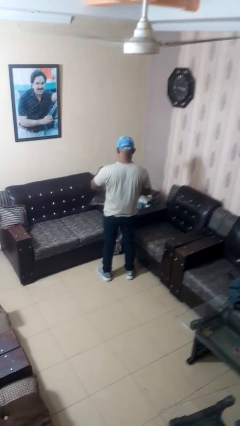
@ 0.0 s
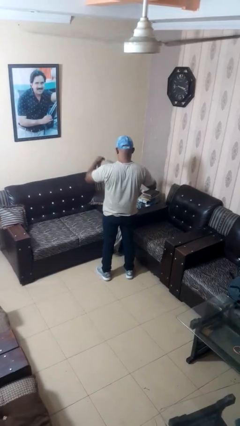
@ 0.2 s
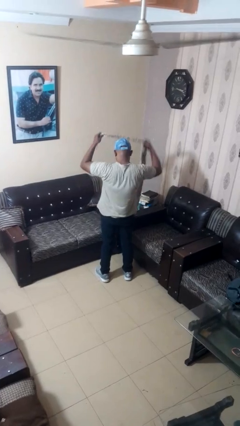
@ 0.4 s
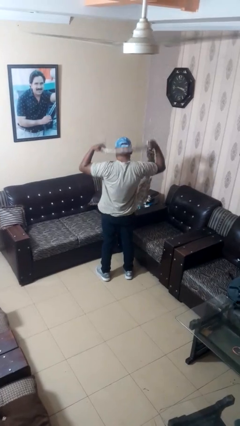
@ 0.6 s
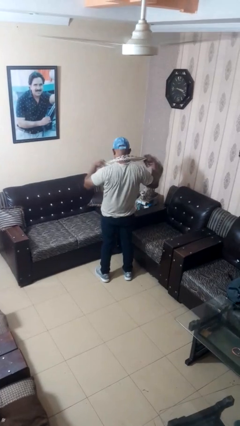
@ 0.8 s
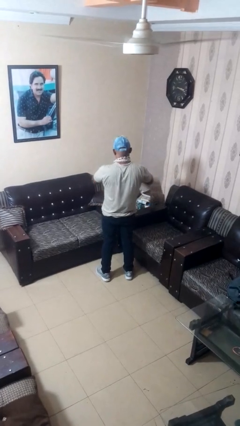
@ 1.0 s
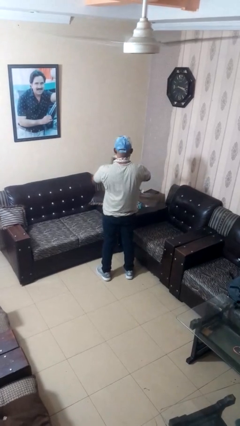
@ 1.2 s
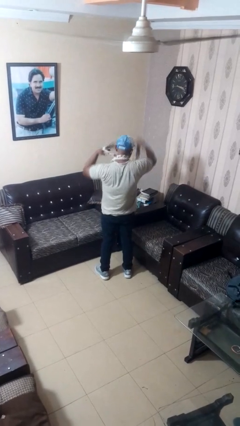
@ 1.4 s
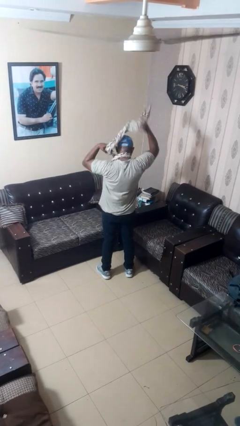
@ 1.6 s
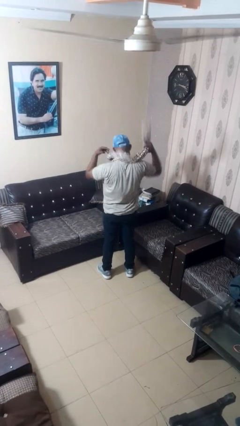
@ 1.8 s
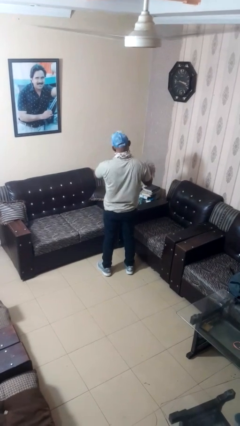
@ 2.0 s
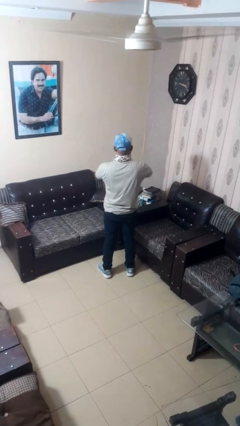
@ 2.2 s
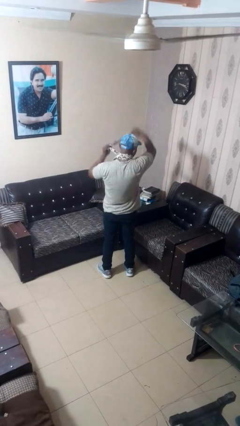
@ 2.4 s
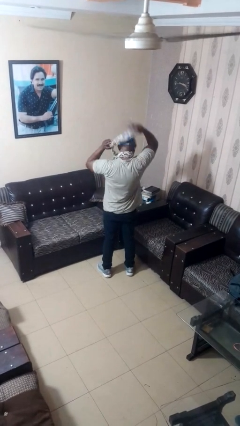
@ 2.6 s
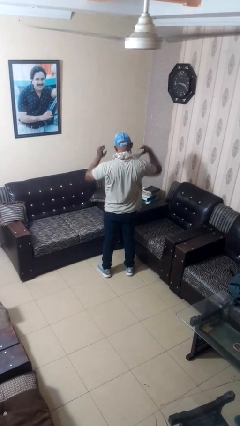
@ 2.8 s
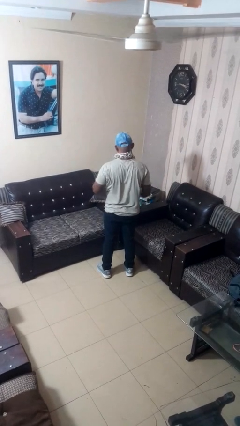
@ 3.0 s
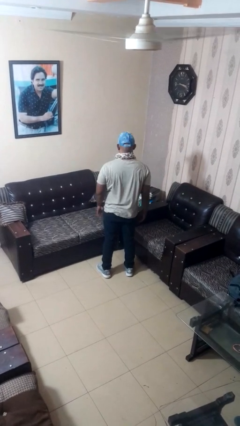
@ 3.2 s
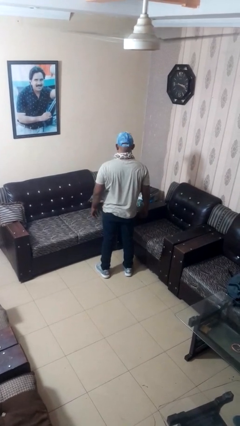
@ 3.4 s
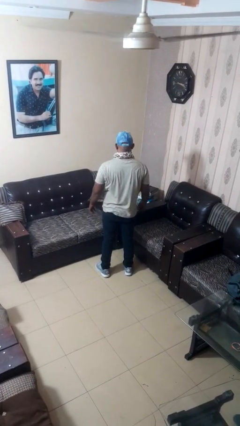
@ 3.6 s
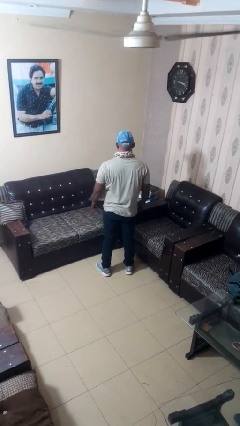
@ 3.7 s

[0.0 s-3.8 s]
person puts on scarf

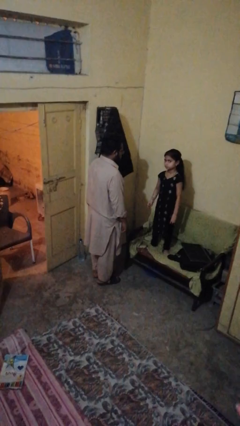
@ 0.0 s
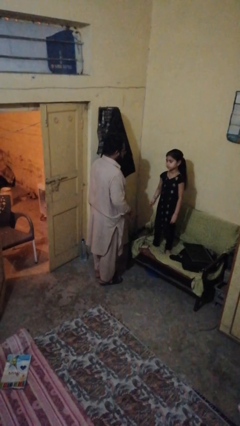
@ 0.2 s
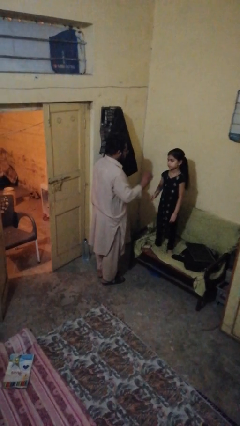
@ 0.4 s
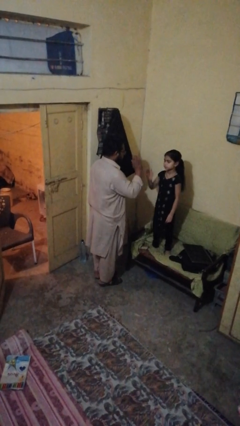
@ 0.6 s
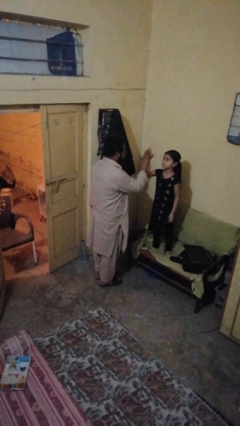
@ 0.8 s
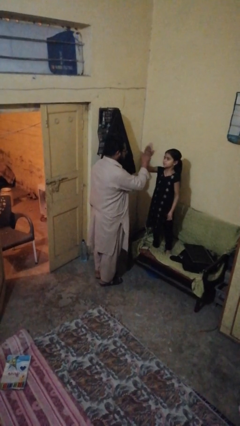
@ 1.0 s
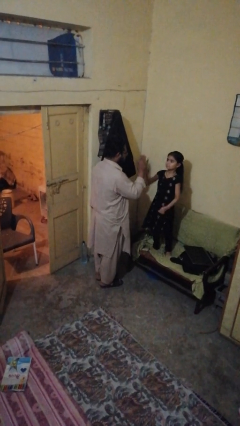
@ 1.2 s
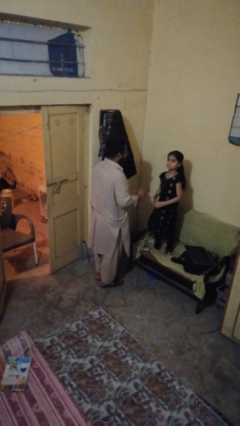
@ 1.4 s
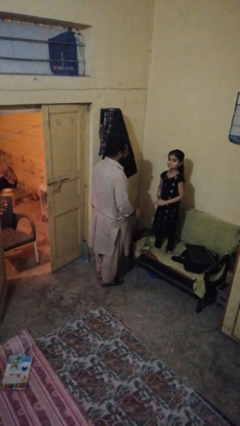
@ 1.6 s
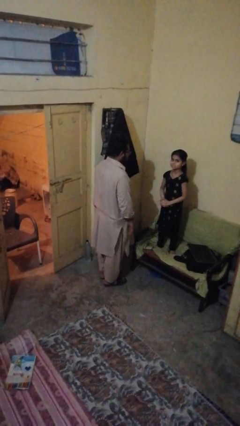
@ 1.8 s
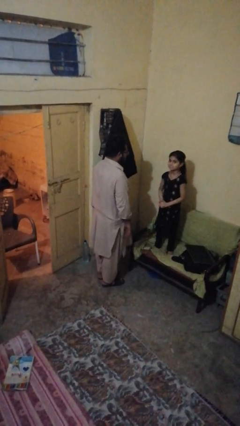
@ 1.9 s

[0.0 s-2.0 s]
person highfives hand

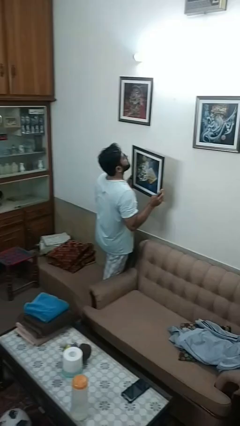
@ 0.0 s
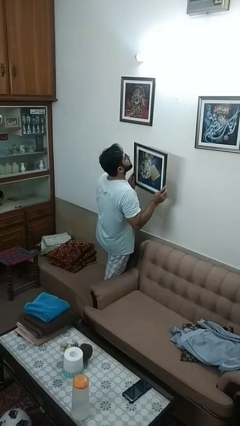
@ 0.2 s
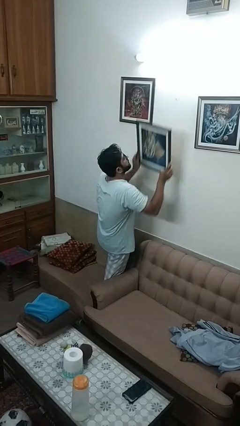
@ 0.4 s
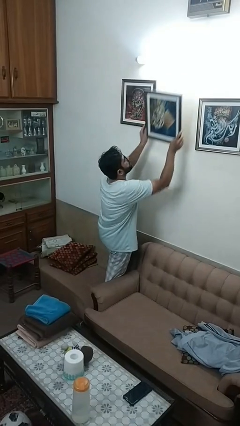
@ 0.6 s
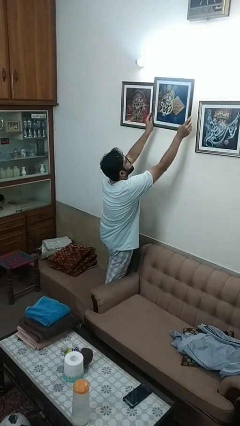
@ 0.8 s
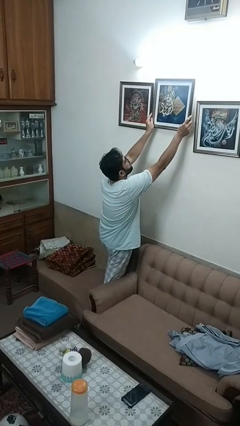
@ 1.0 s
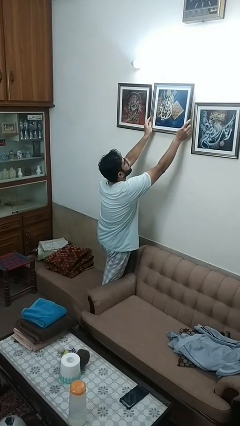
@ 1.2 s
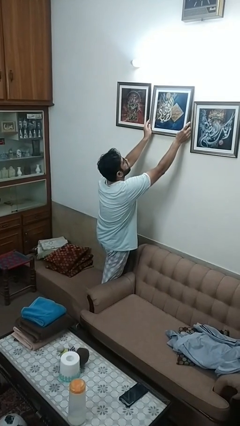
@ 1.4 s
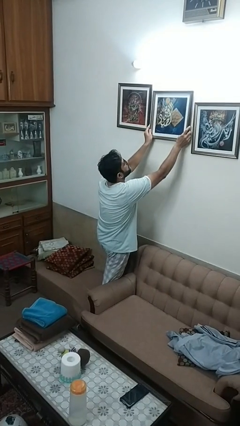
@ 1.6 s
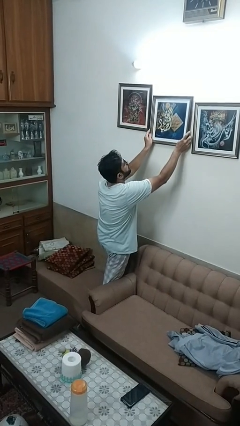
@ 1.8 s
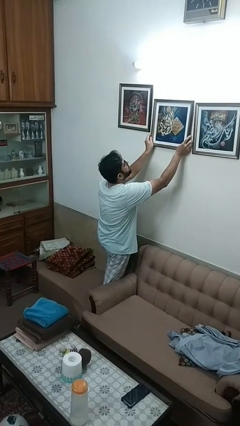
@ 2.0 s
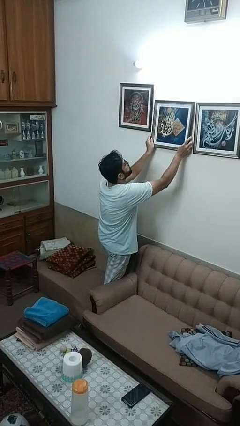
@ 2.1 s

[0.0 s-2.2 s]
person puts up picture frame

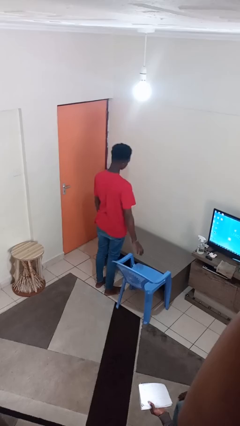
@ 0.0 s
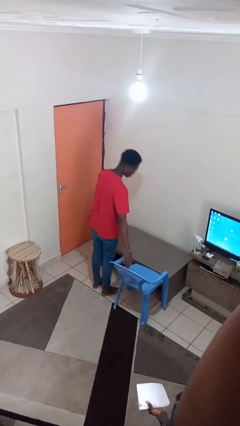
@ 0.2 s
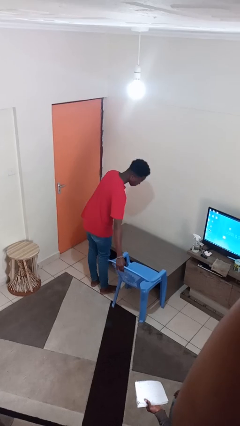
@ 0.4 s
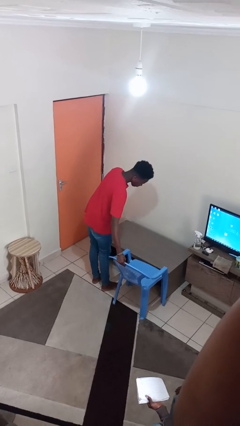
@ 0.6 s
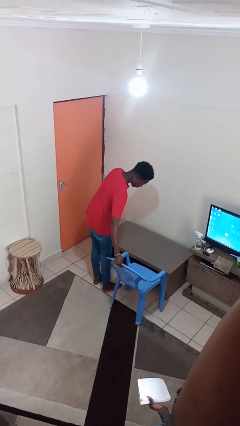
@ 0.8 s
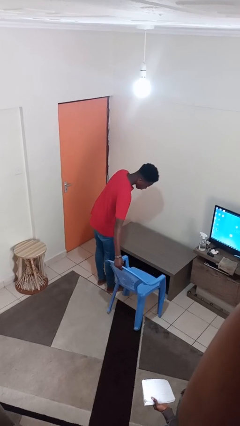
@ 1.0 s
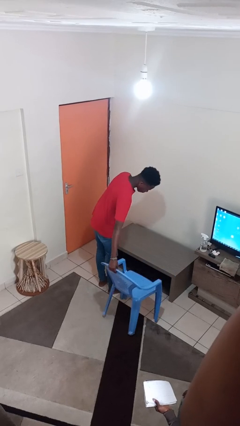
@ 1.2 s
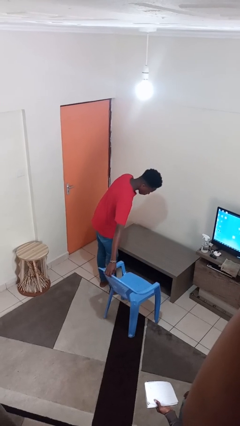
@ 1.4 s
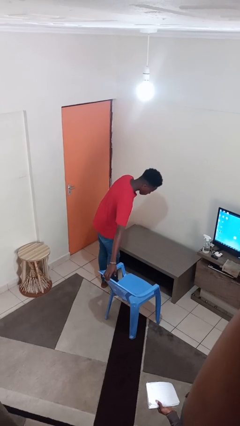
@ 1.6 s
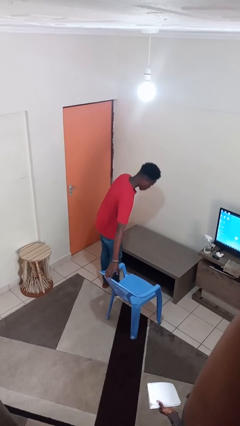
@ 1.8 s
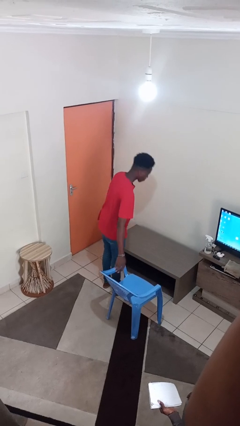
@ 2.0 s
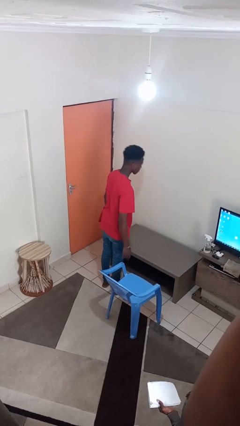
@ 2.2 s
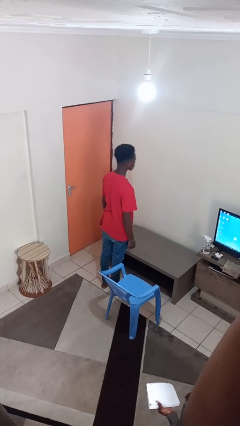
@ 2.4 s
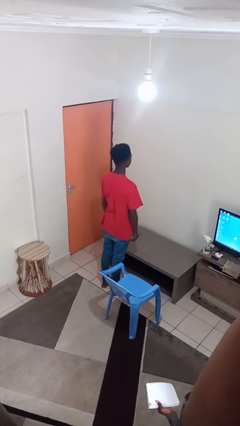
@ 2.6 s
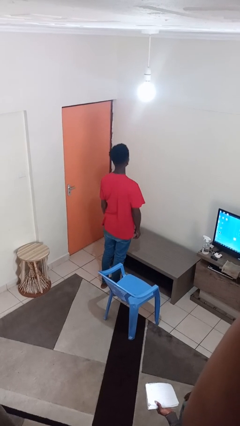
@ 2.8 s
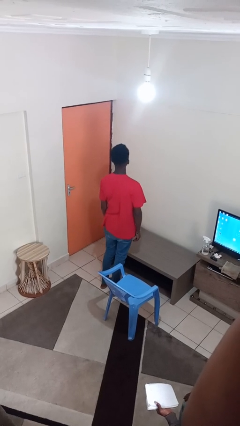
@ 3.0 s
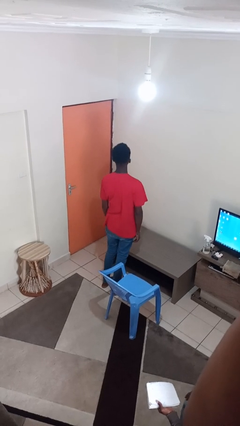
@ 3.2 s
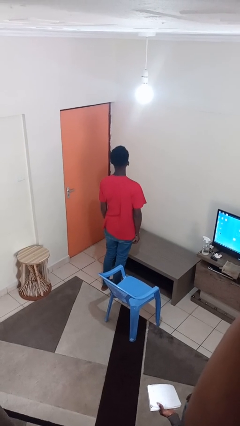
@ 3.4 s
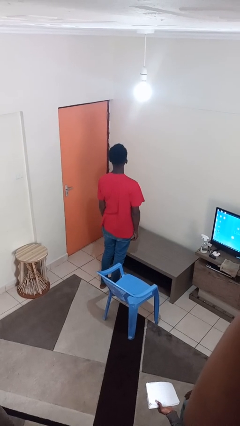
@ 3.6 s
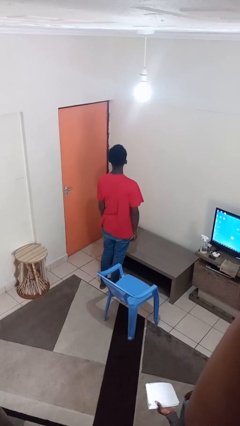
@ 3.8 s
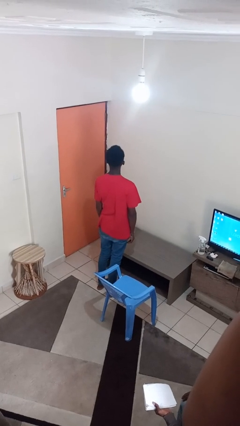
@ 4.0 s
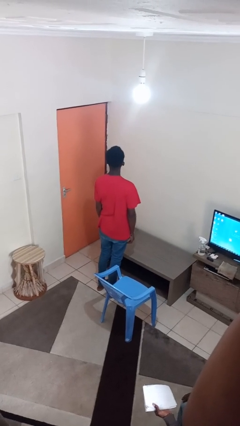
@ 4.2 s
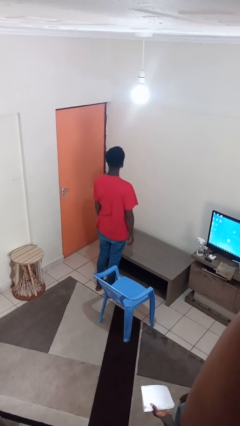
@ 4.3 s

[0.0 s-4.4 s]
person pulls out chair

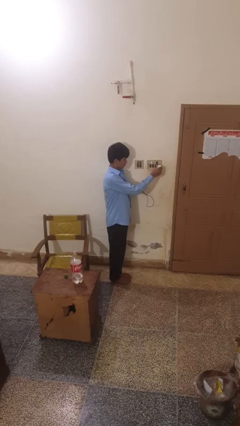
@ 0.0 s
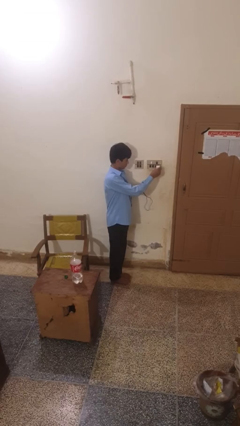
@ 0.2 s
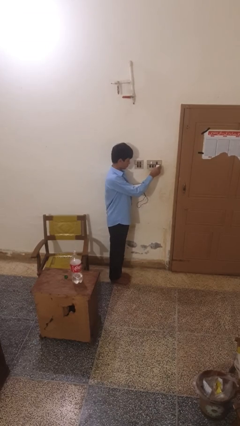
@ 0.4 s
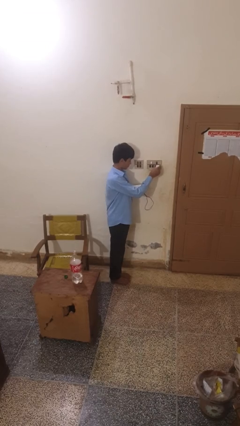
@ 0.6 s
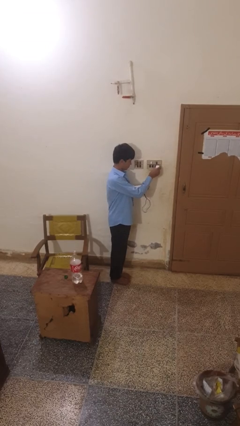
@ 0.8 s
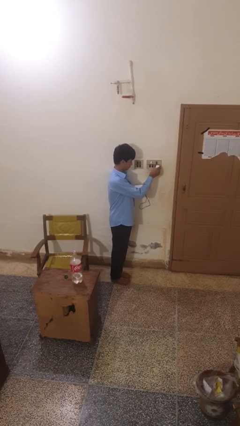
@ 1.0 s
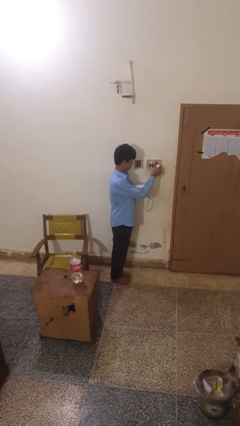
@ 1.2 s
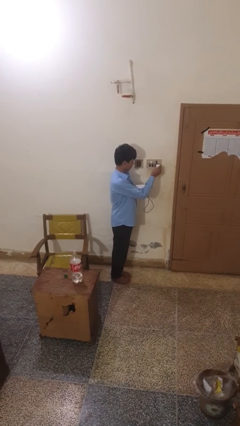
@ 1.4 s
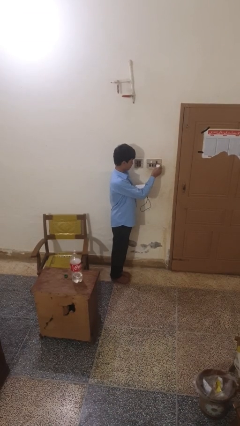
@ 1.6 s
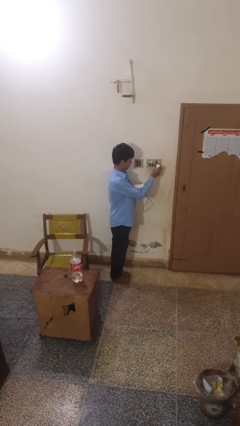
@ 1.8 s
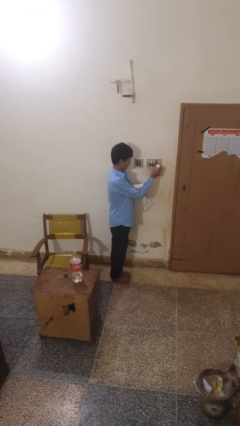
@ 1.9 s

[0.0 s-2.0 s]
person plugs into electrical socket

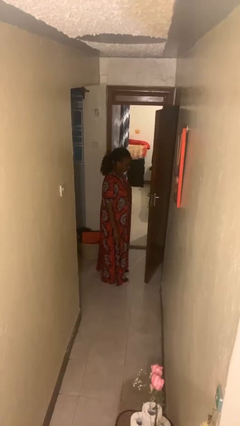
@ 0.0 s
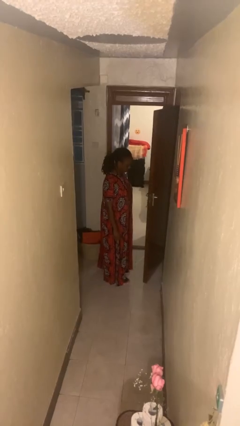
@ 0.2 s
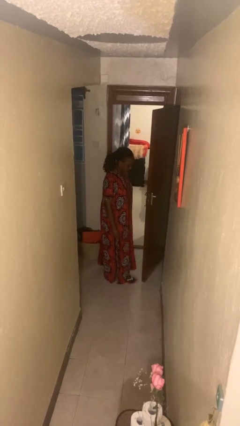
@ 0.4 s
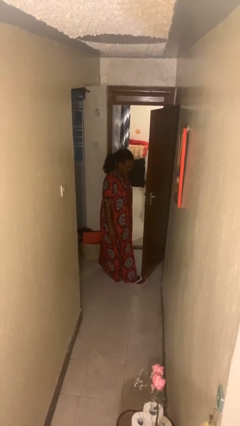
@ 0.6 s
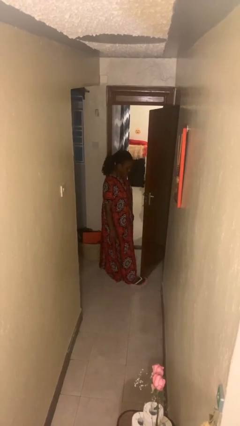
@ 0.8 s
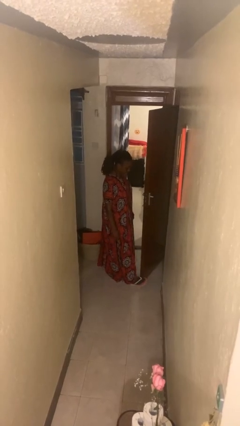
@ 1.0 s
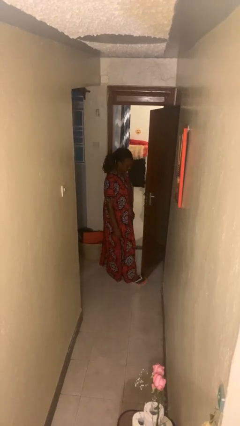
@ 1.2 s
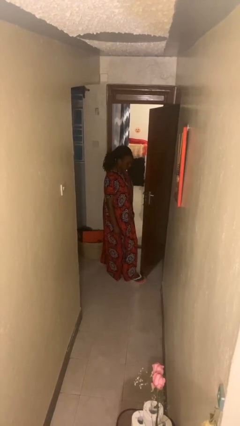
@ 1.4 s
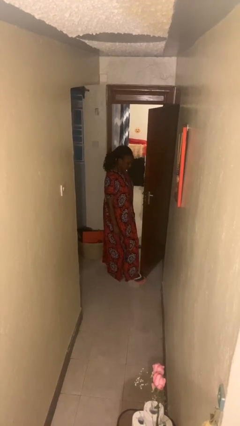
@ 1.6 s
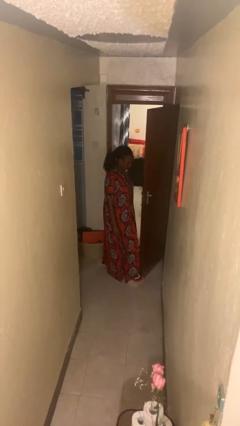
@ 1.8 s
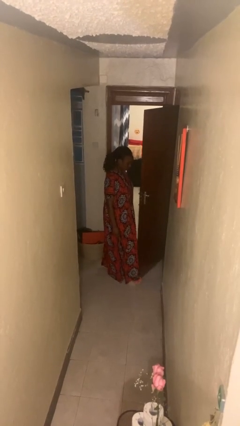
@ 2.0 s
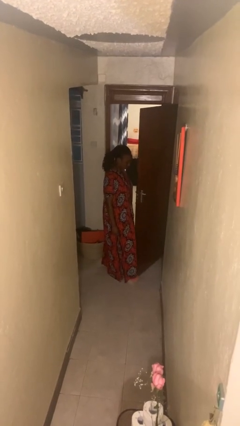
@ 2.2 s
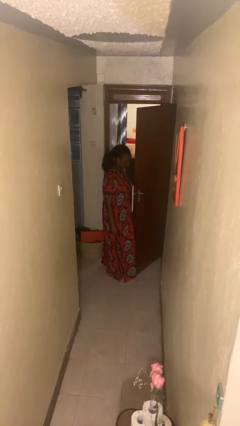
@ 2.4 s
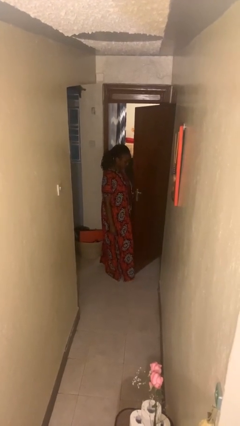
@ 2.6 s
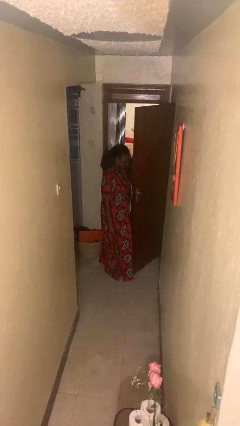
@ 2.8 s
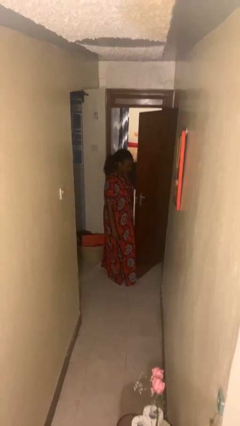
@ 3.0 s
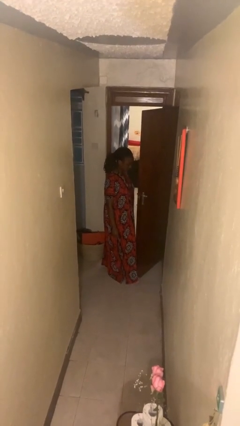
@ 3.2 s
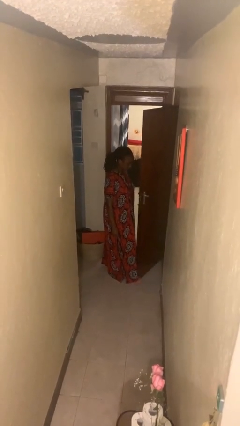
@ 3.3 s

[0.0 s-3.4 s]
person opens facility door
